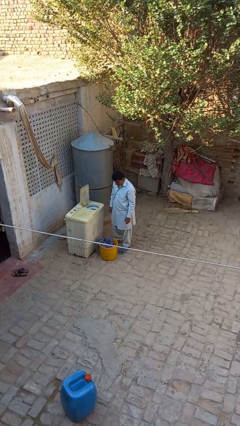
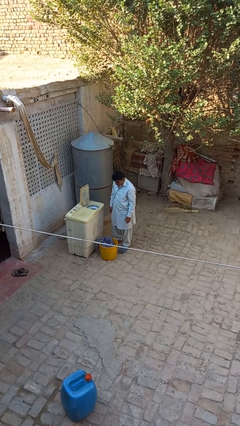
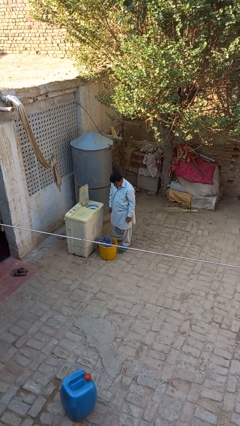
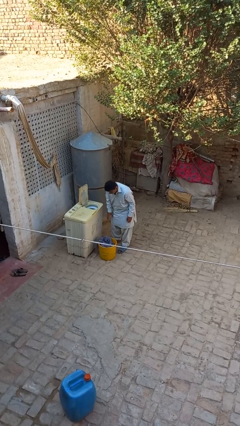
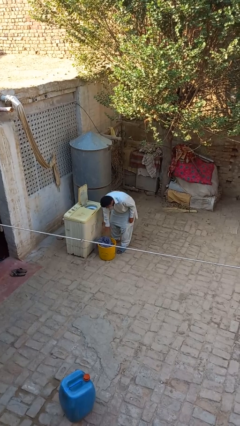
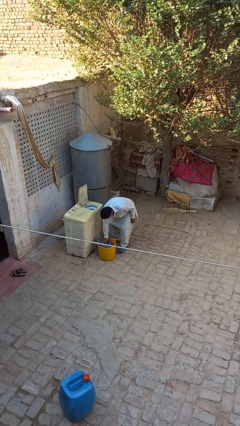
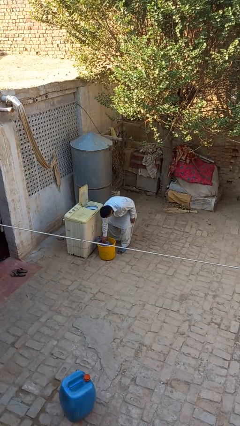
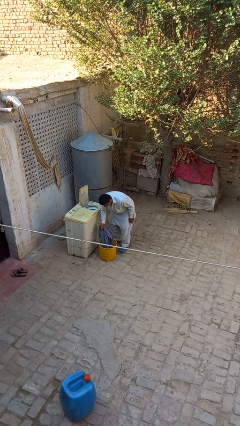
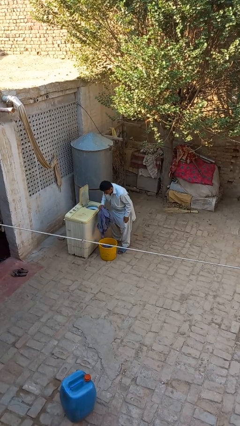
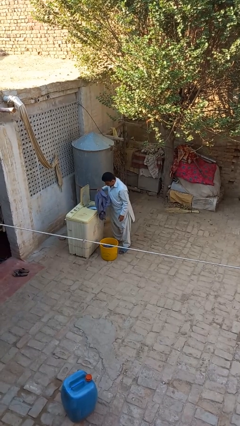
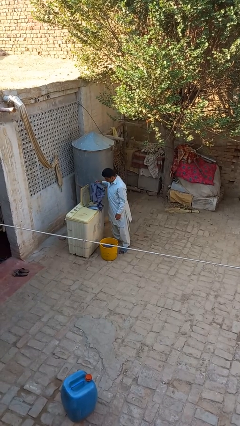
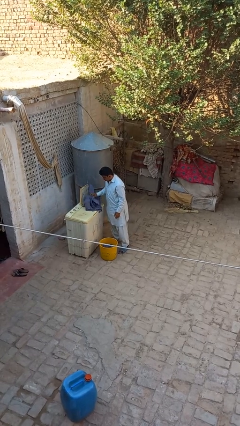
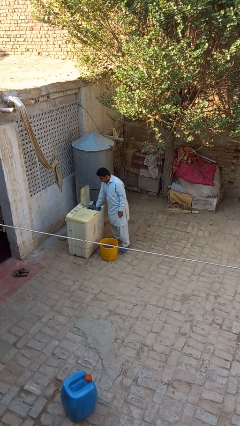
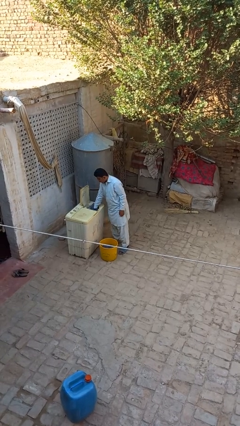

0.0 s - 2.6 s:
person loads dryer

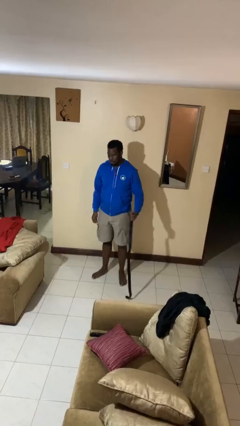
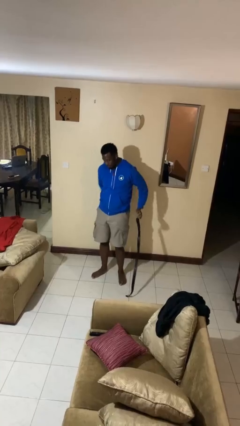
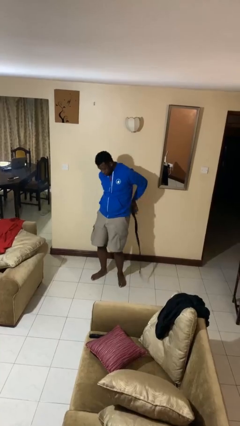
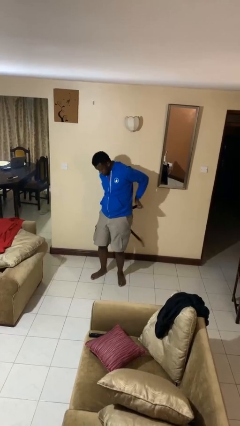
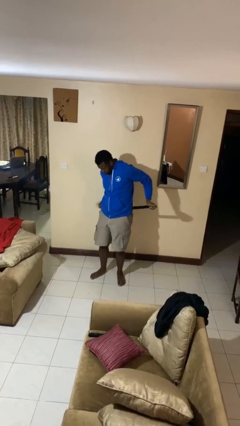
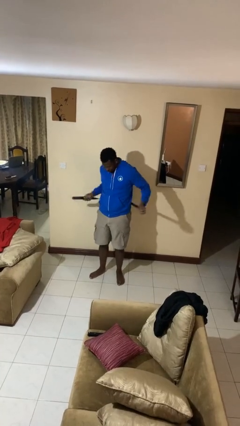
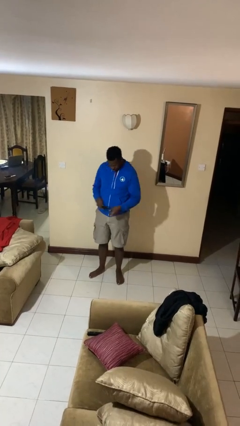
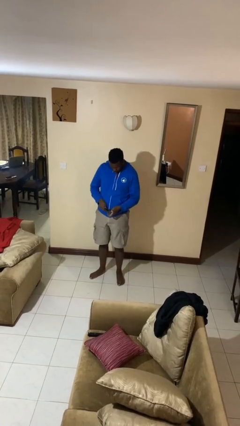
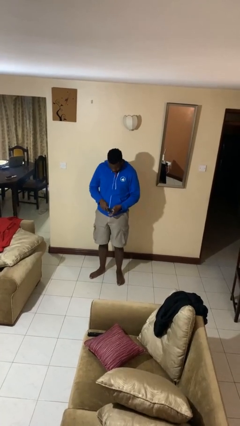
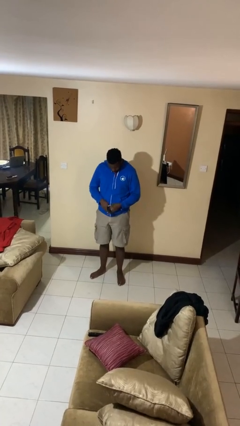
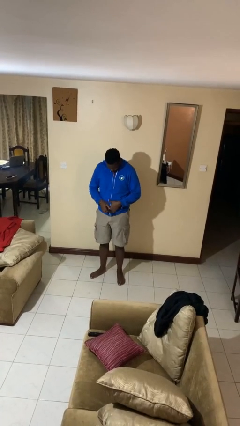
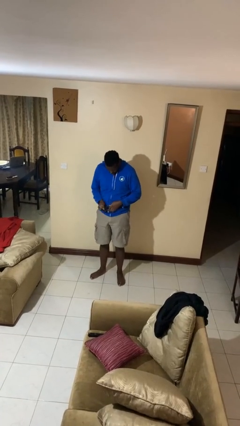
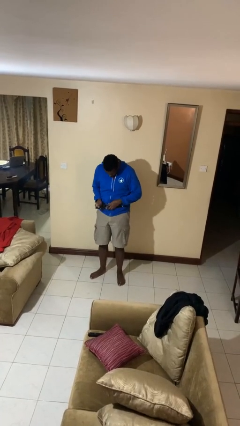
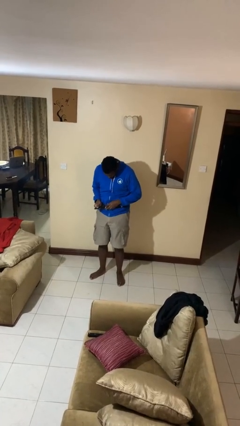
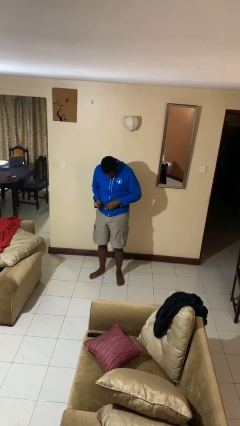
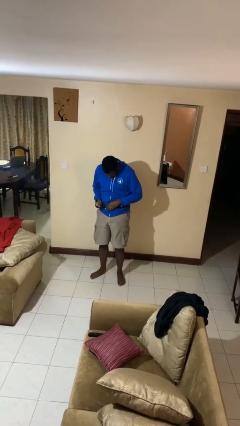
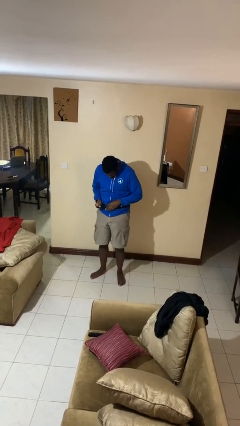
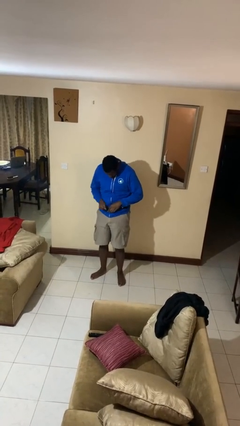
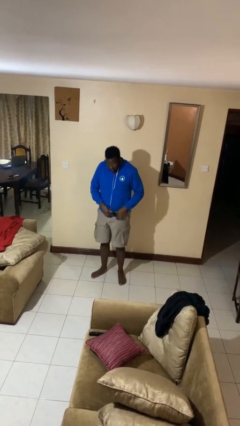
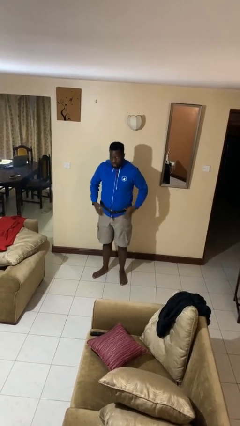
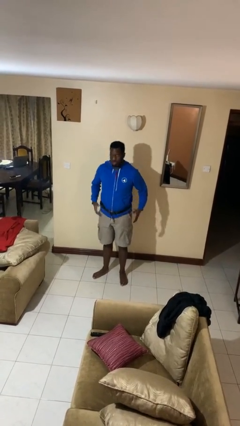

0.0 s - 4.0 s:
person puts on belt

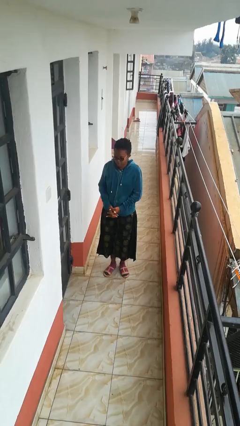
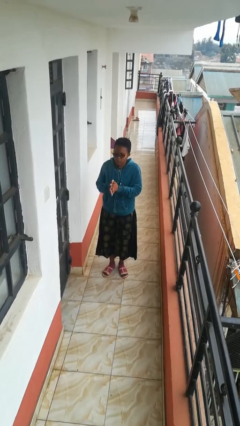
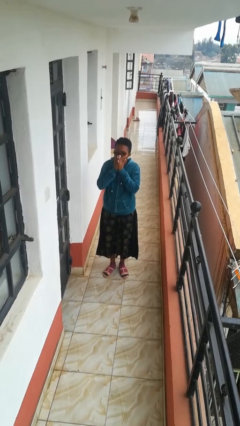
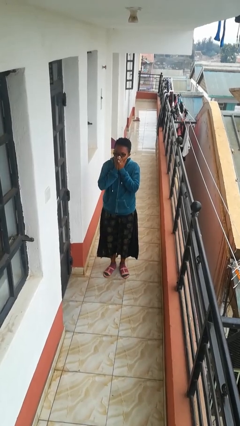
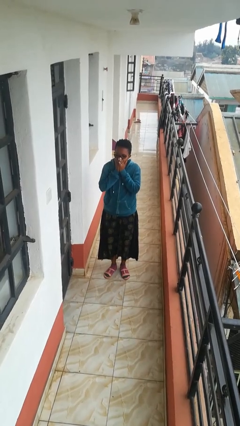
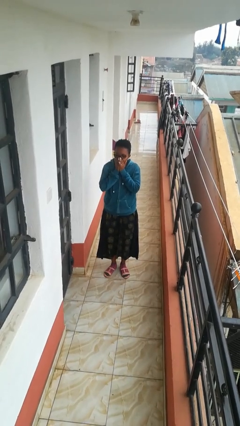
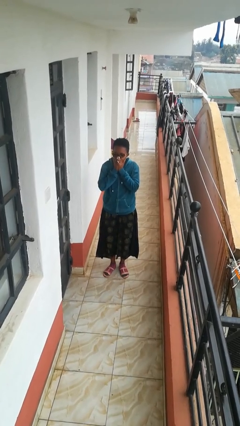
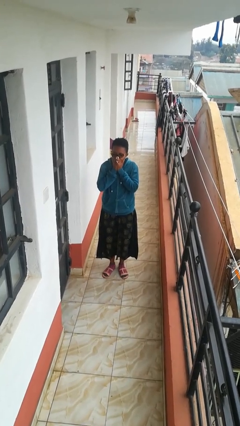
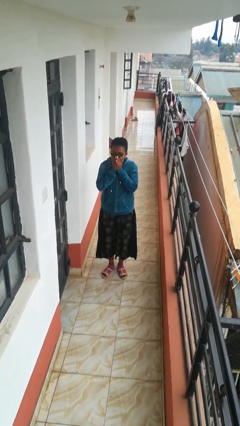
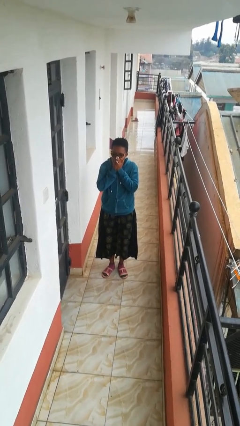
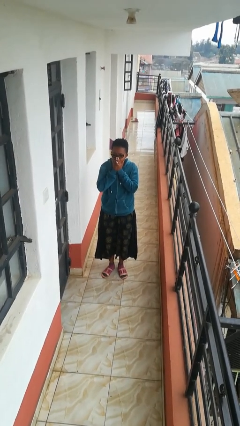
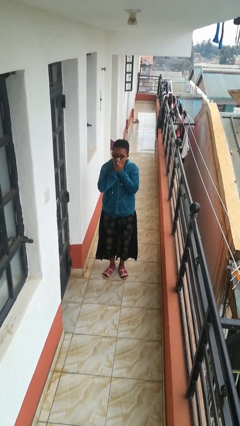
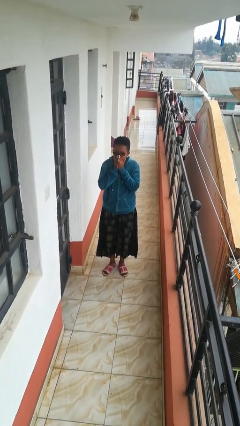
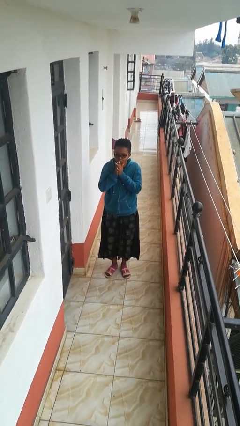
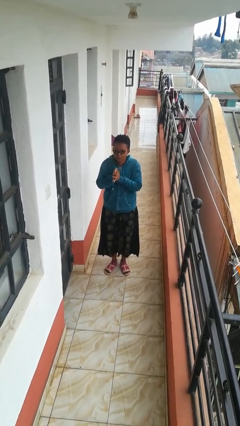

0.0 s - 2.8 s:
person blows into hands

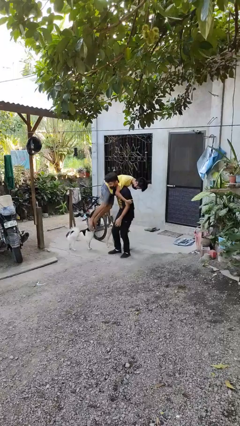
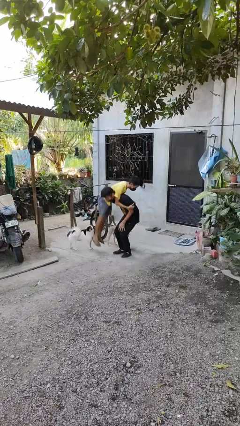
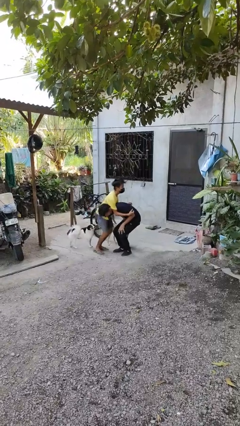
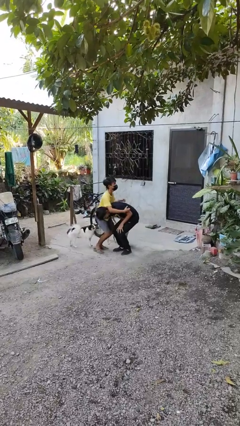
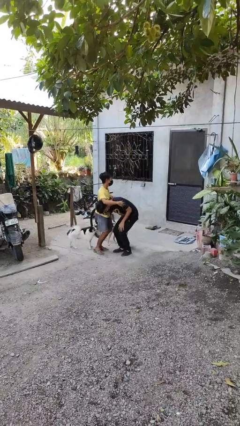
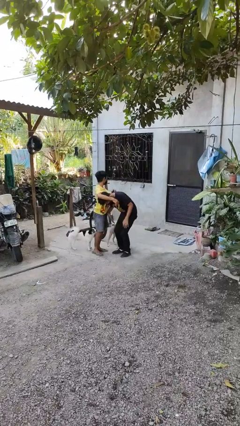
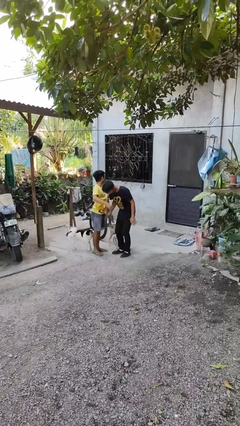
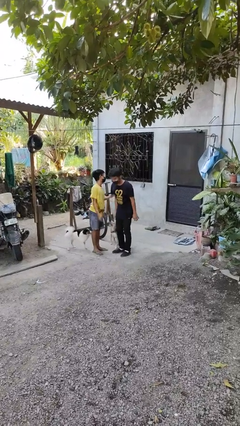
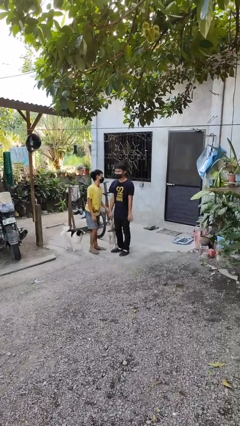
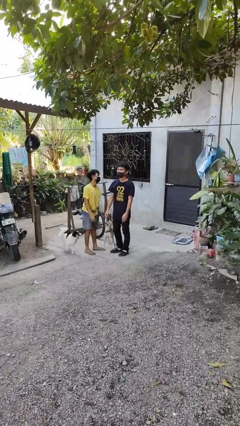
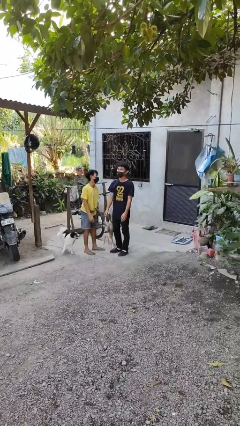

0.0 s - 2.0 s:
person puts down person

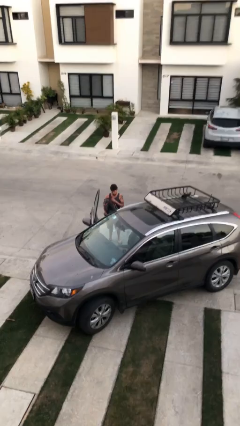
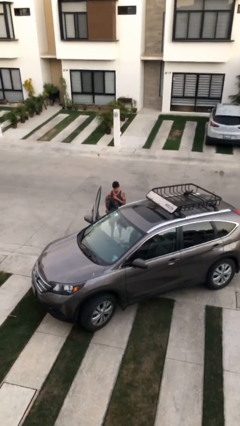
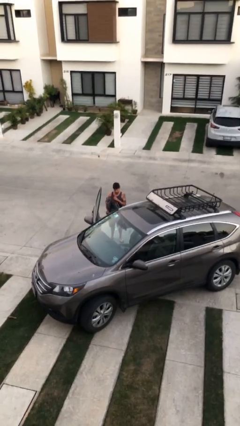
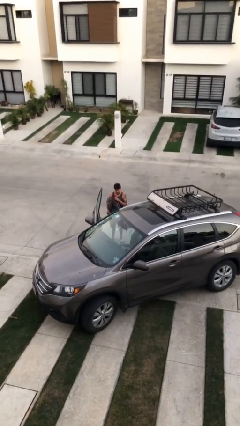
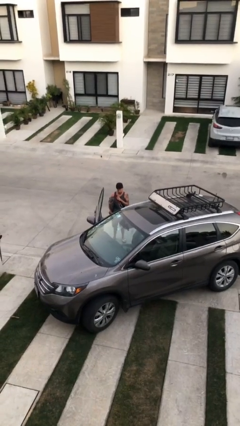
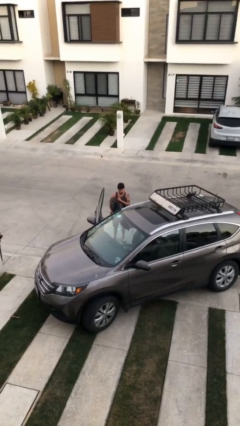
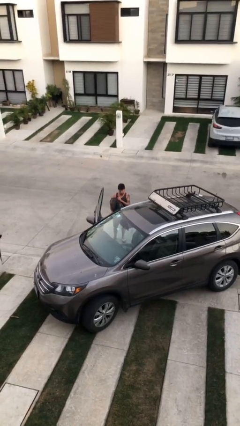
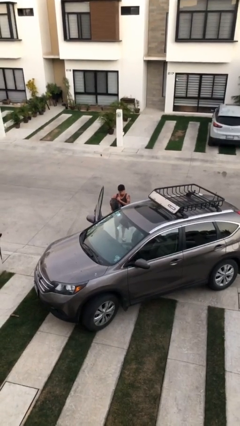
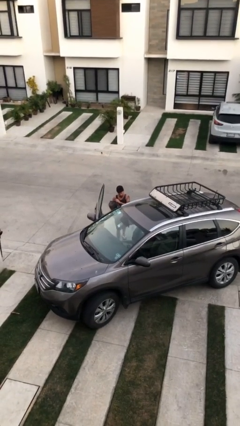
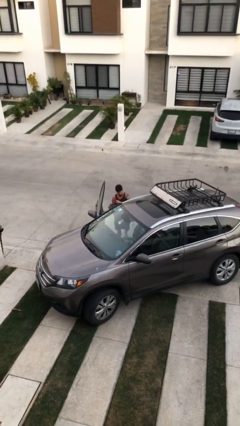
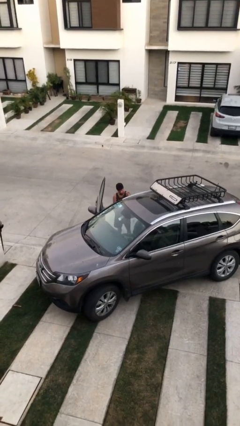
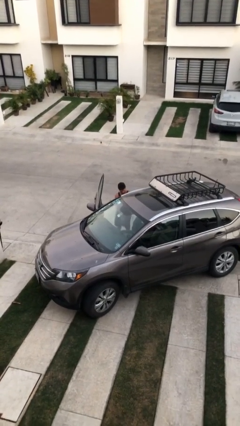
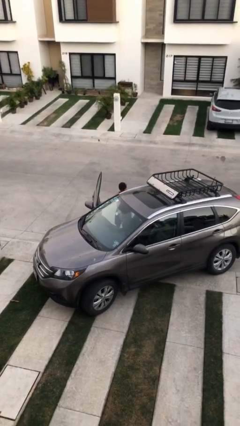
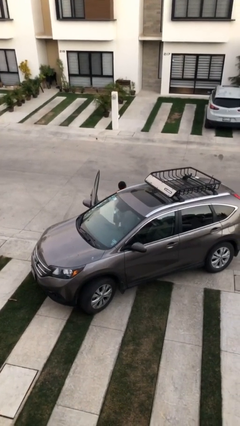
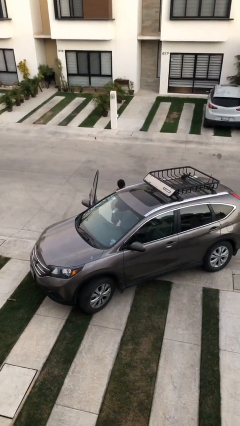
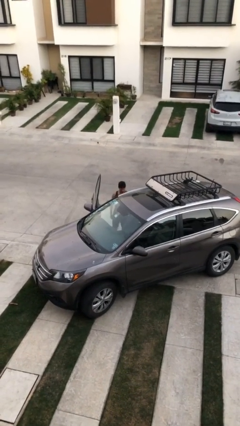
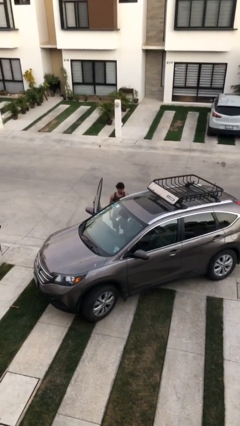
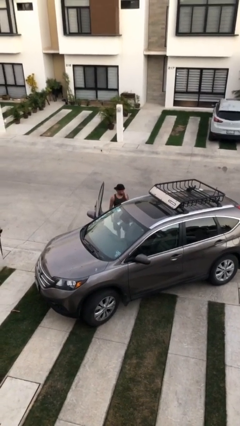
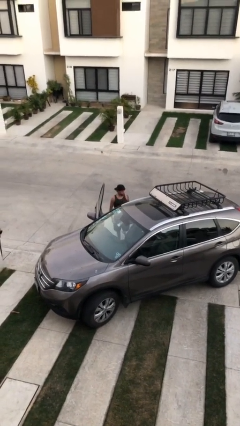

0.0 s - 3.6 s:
person loads car

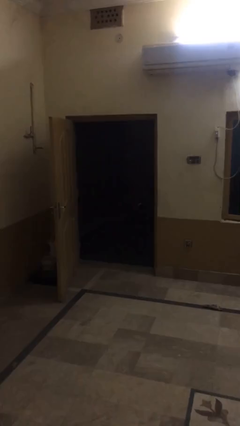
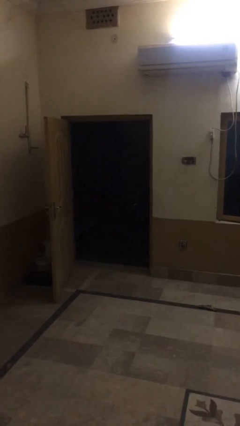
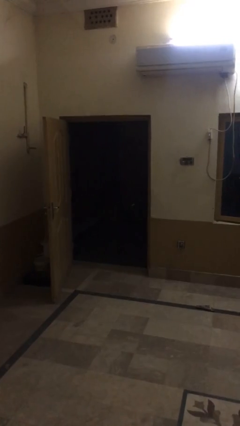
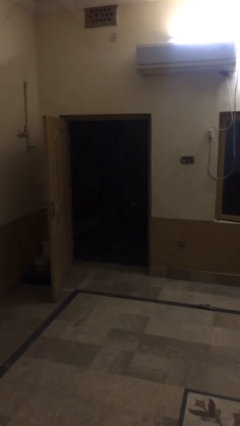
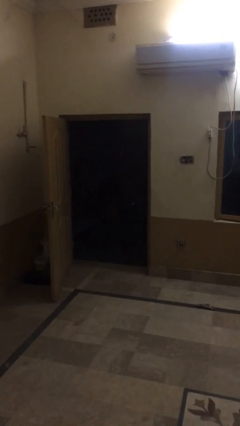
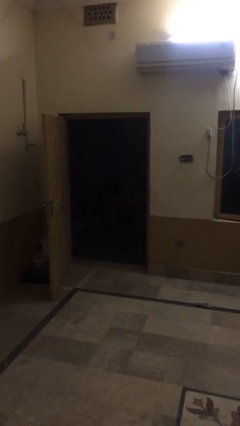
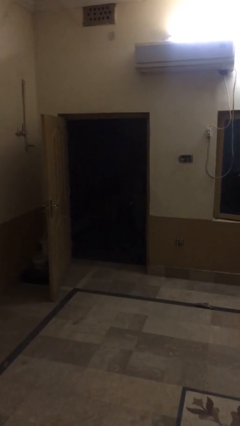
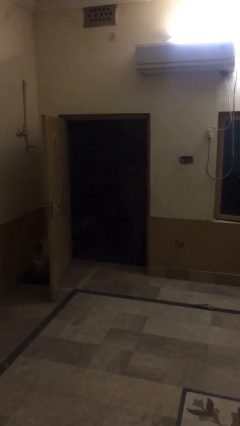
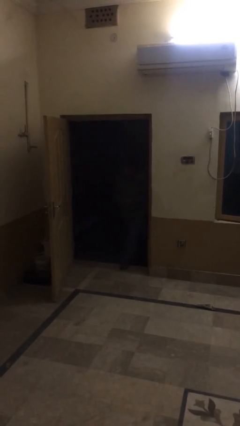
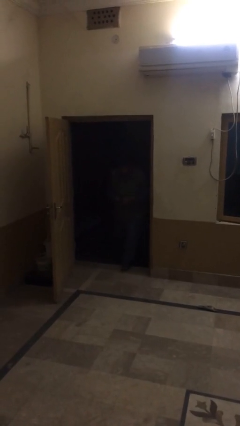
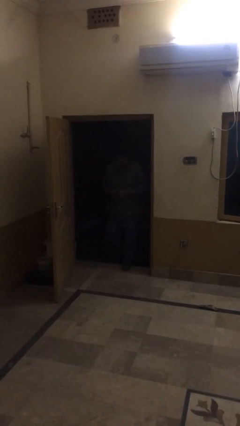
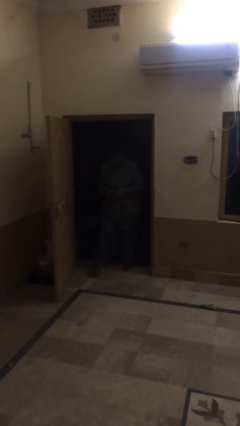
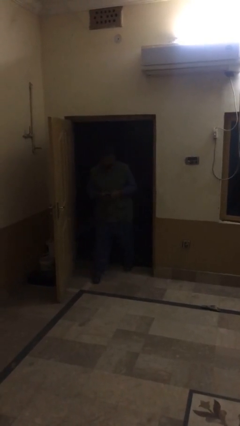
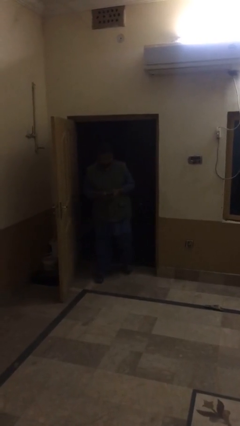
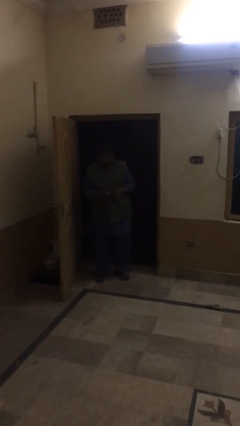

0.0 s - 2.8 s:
person enters scene through structure
